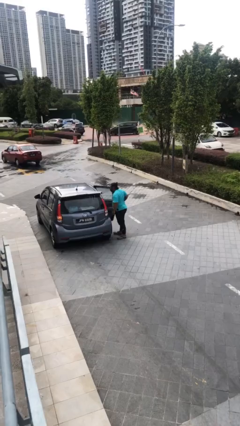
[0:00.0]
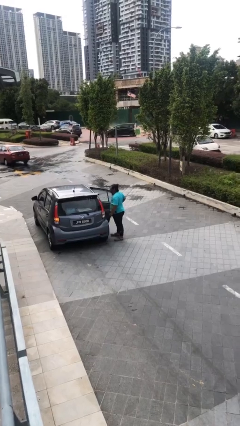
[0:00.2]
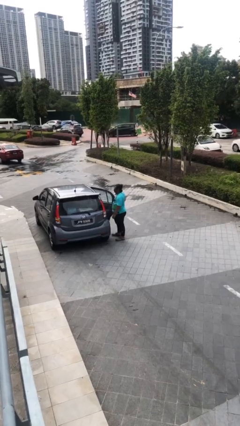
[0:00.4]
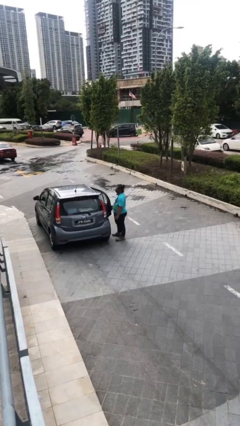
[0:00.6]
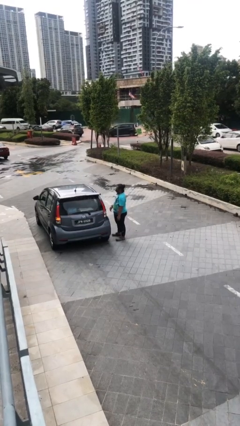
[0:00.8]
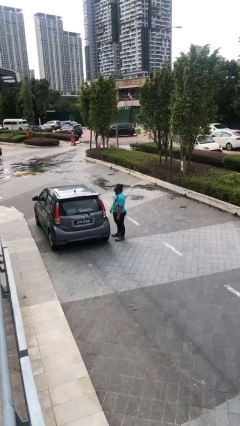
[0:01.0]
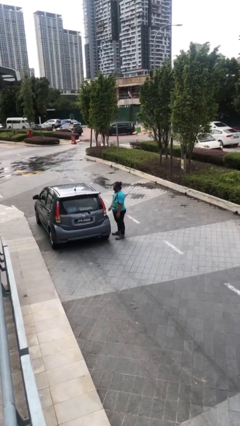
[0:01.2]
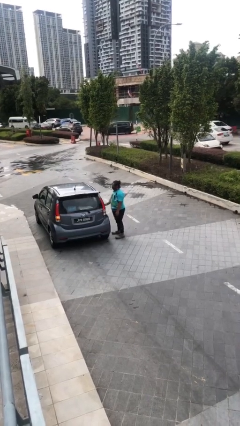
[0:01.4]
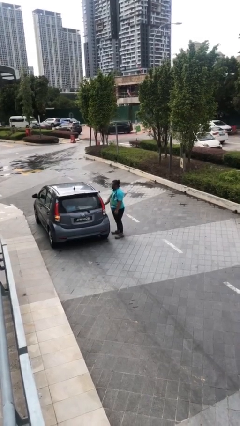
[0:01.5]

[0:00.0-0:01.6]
person closes car door

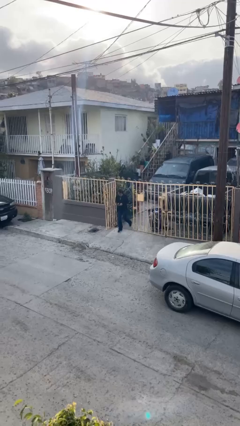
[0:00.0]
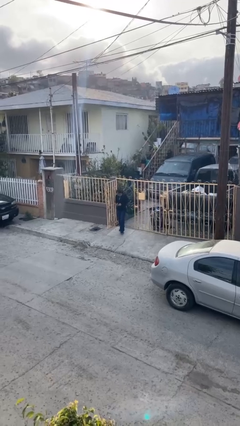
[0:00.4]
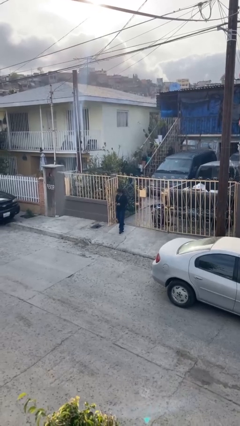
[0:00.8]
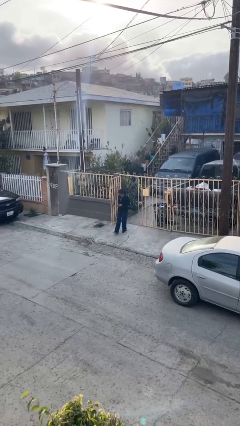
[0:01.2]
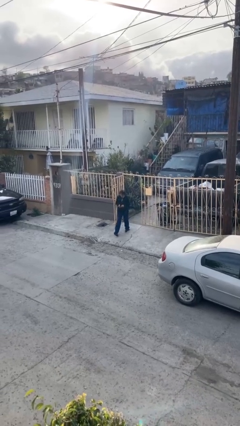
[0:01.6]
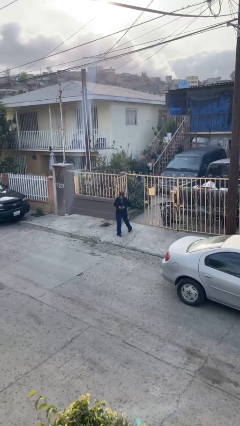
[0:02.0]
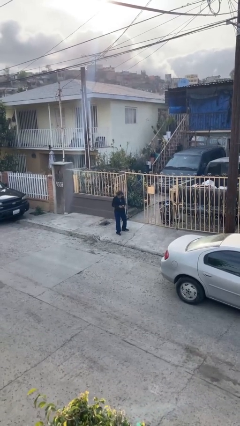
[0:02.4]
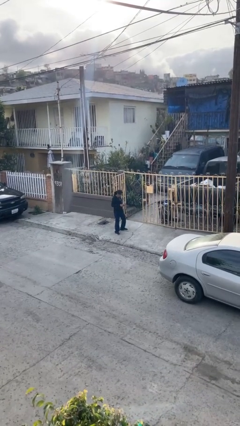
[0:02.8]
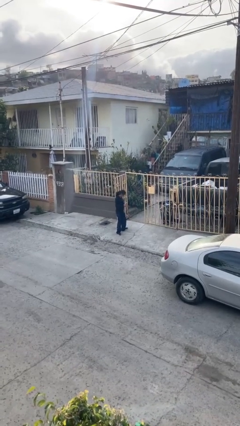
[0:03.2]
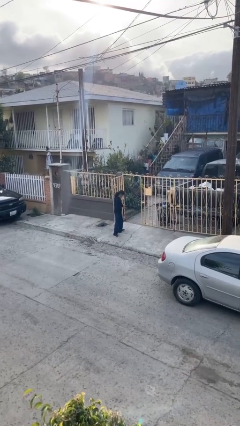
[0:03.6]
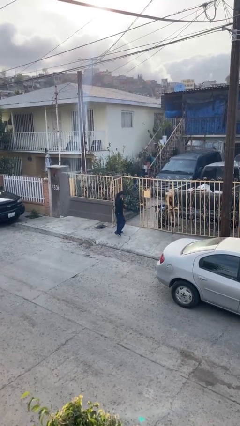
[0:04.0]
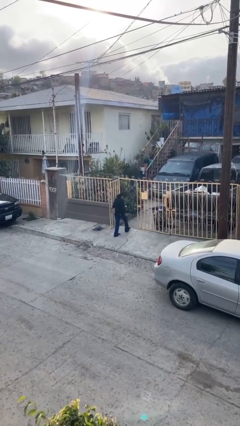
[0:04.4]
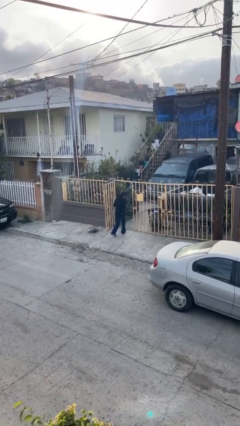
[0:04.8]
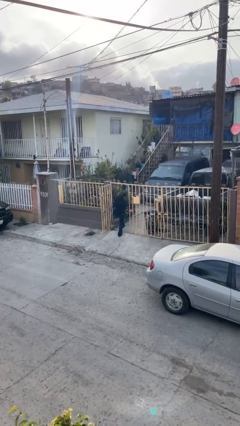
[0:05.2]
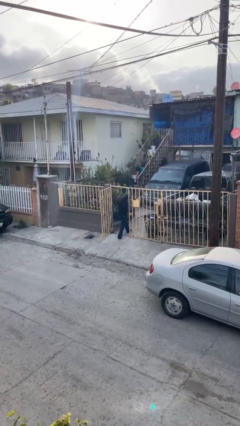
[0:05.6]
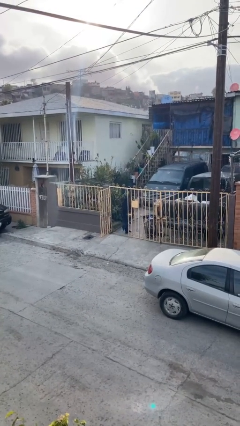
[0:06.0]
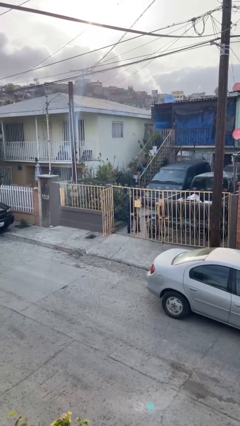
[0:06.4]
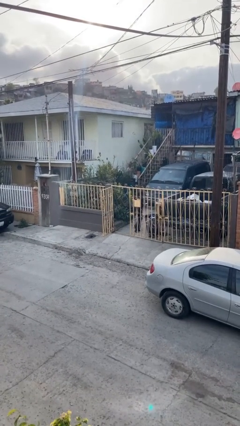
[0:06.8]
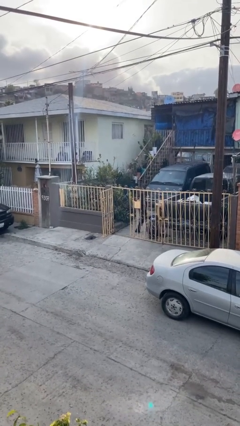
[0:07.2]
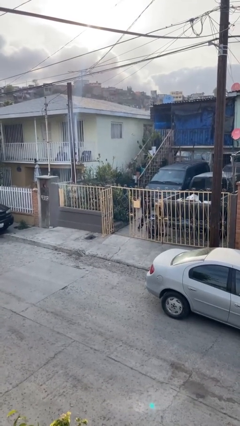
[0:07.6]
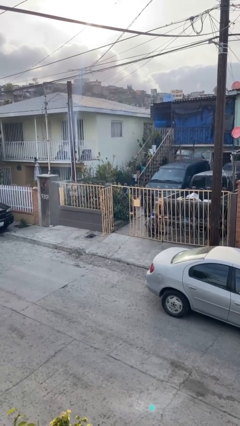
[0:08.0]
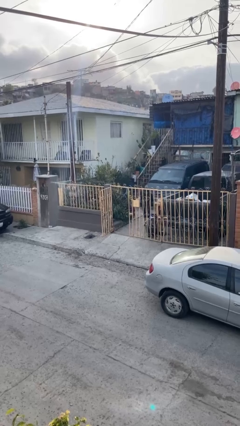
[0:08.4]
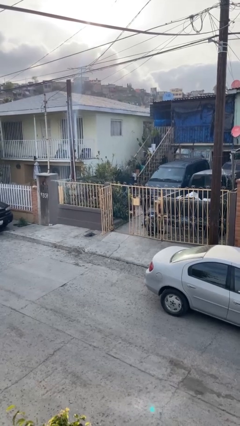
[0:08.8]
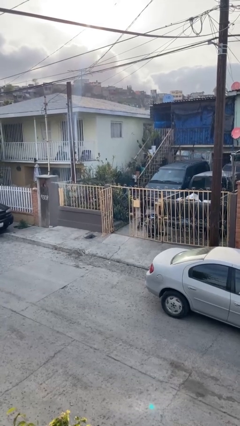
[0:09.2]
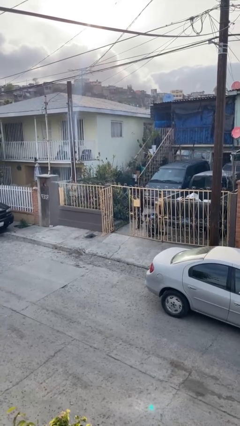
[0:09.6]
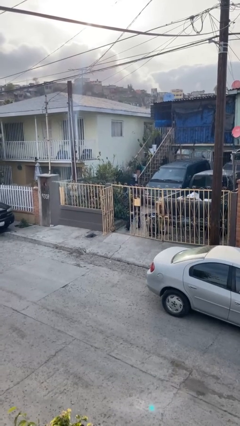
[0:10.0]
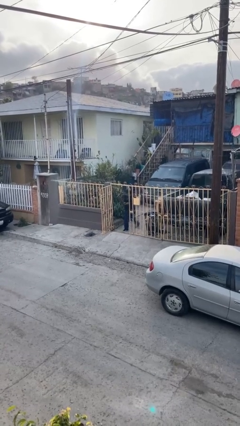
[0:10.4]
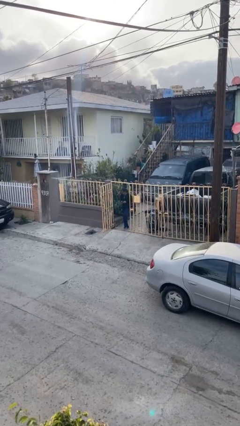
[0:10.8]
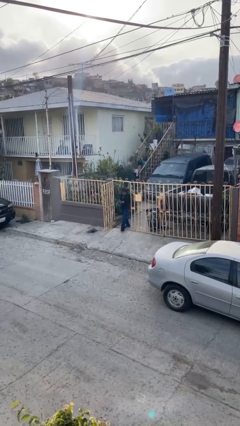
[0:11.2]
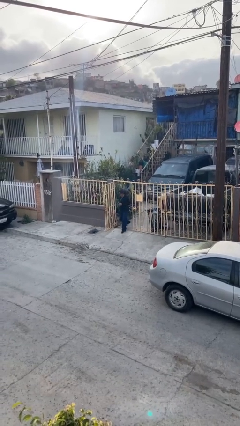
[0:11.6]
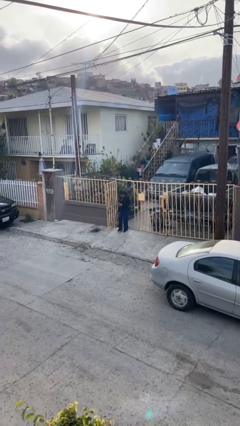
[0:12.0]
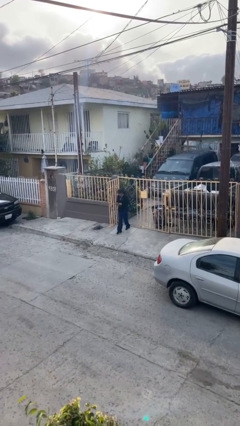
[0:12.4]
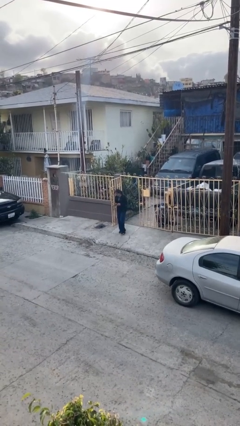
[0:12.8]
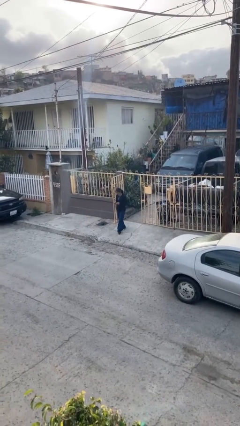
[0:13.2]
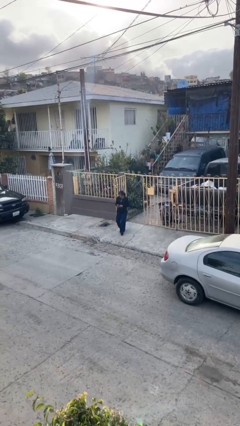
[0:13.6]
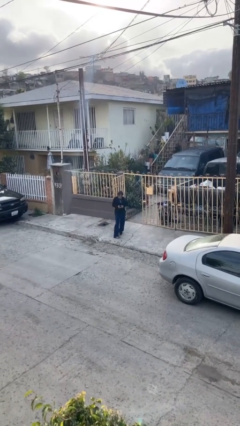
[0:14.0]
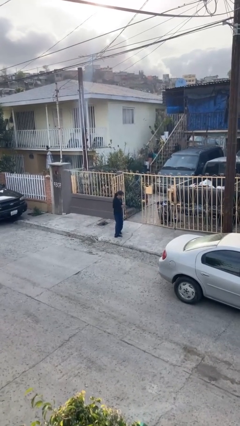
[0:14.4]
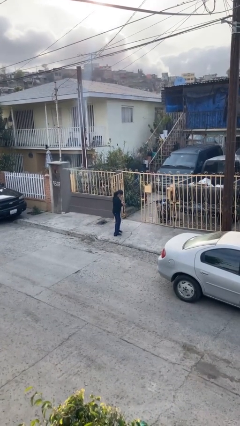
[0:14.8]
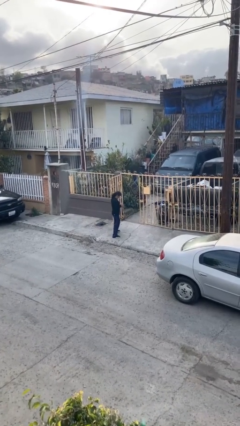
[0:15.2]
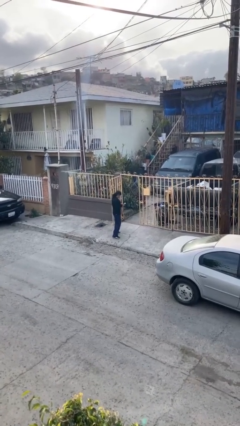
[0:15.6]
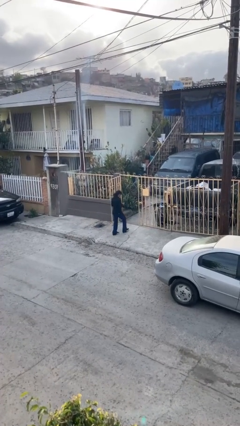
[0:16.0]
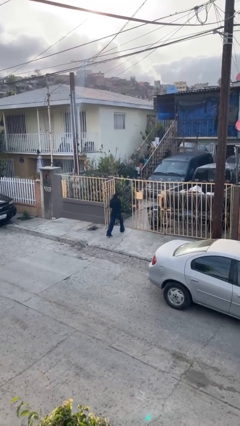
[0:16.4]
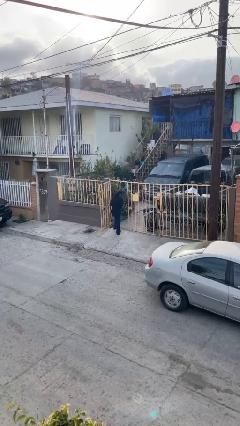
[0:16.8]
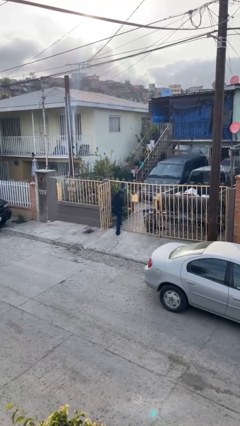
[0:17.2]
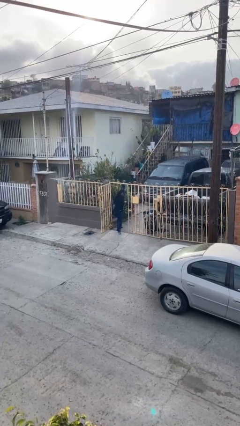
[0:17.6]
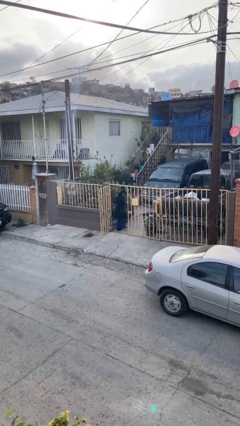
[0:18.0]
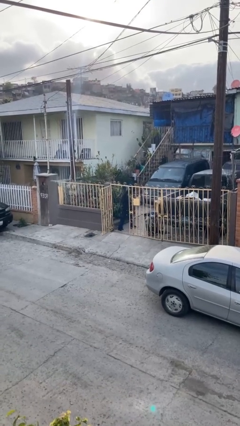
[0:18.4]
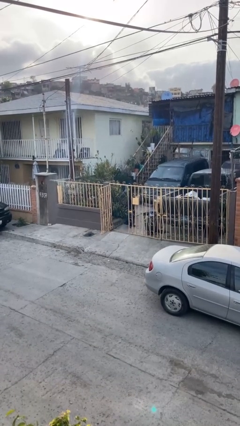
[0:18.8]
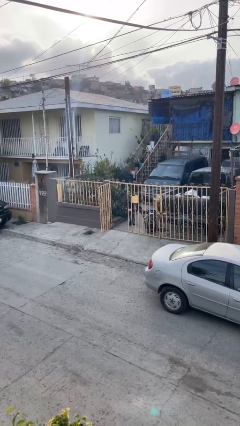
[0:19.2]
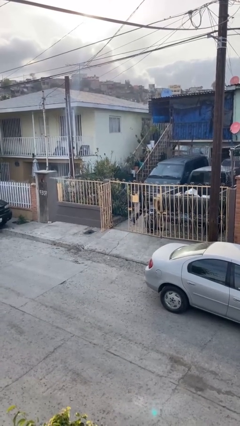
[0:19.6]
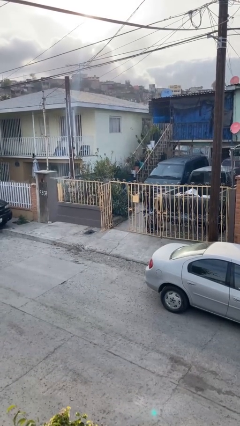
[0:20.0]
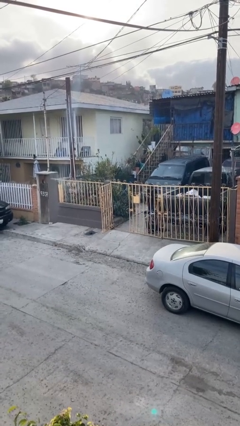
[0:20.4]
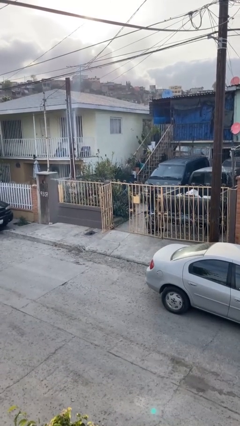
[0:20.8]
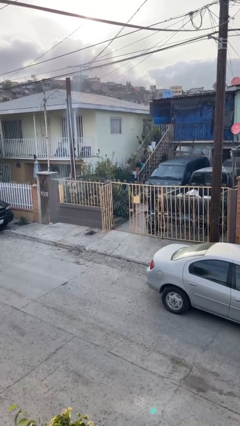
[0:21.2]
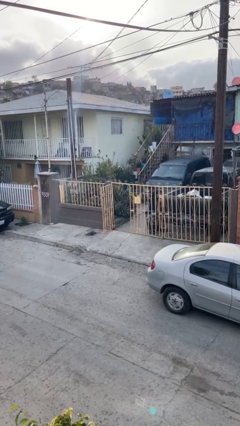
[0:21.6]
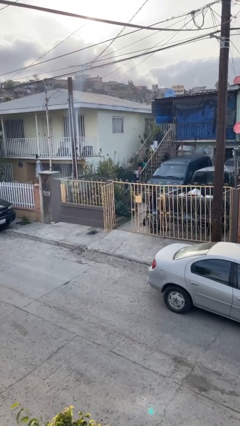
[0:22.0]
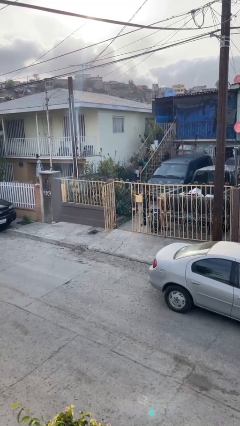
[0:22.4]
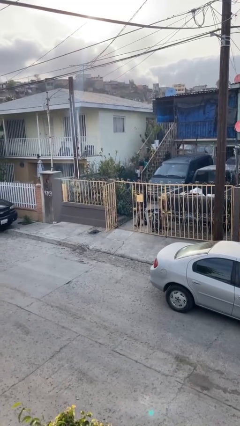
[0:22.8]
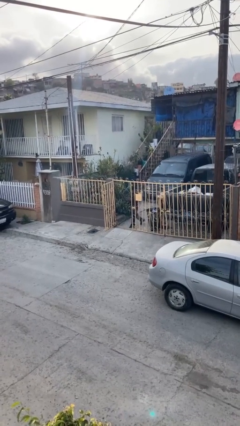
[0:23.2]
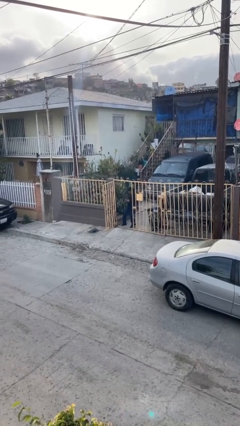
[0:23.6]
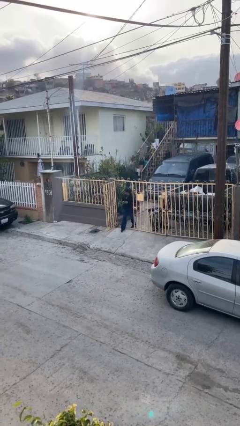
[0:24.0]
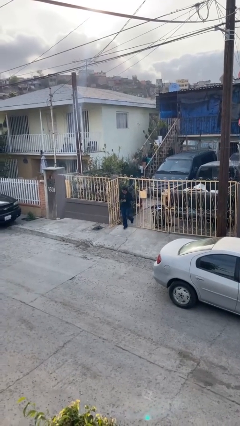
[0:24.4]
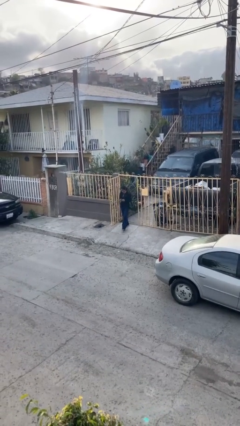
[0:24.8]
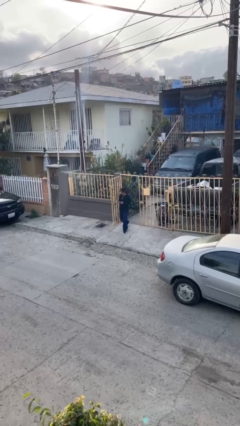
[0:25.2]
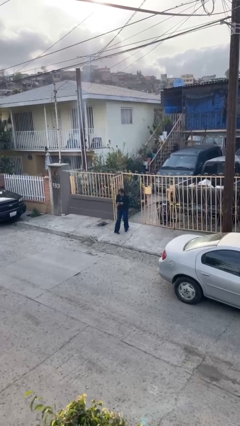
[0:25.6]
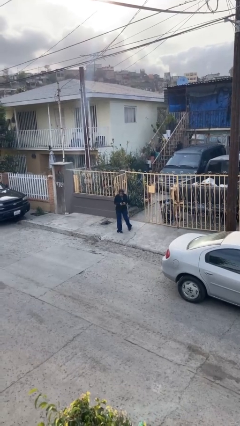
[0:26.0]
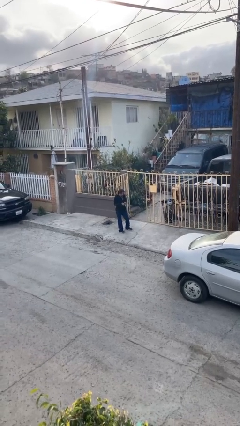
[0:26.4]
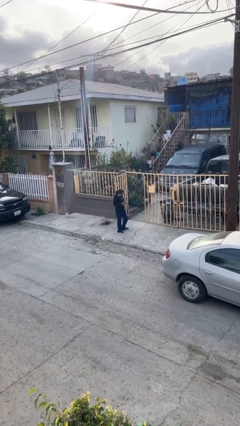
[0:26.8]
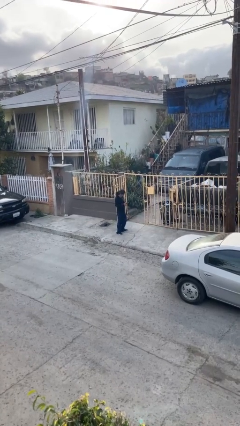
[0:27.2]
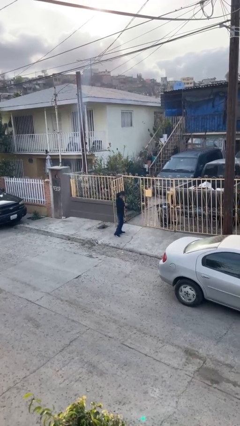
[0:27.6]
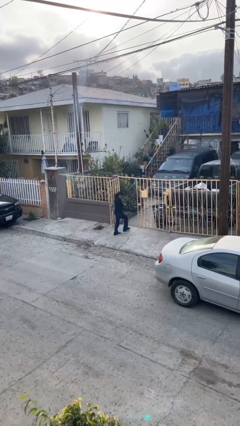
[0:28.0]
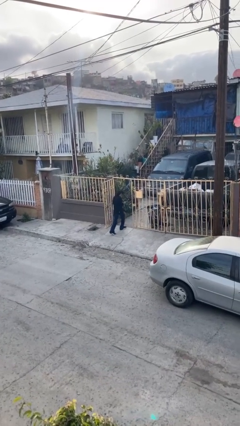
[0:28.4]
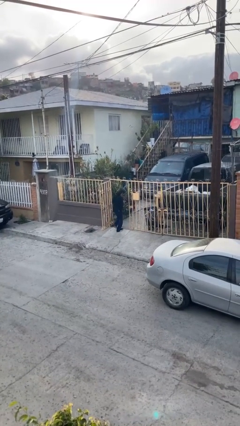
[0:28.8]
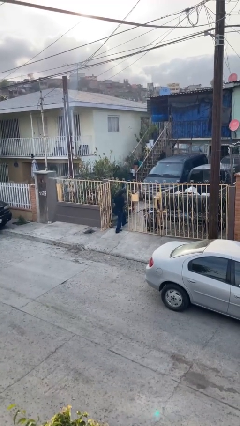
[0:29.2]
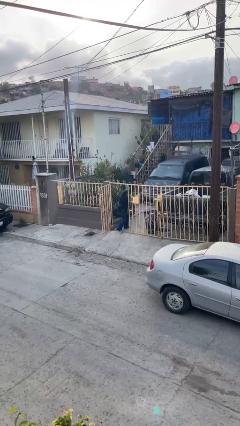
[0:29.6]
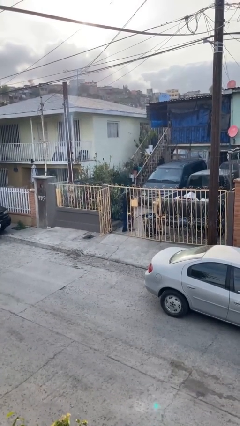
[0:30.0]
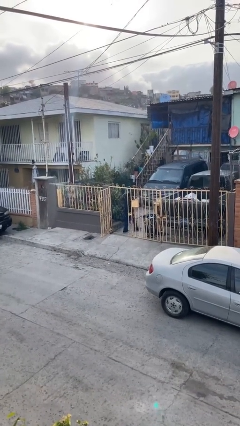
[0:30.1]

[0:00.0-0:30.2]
person texts on phone

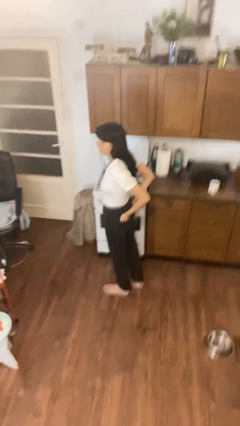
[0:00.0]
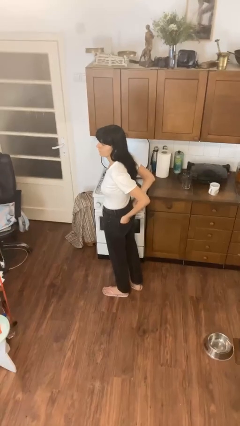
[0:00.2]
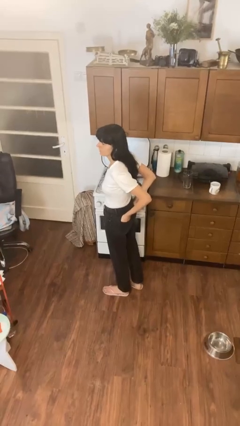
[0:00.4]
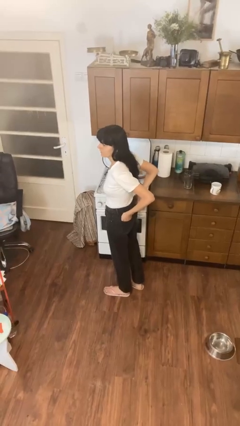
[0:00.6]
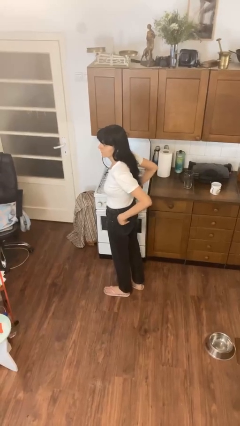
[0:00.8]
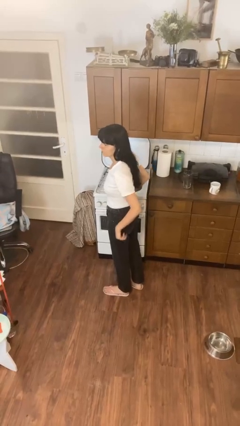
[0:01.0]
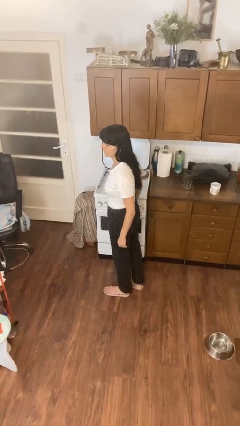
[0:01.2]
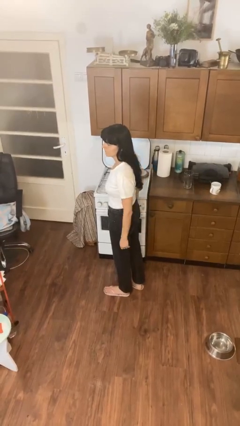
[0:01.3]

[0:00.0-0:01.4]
person puts hands in back pockets
